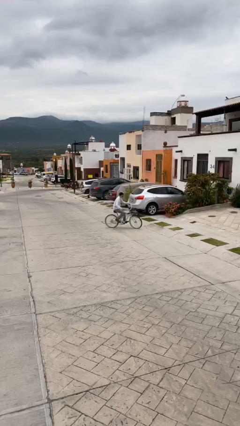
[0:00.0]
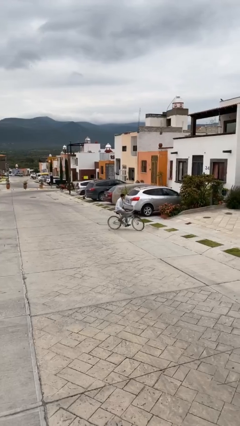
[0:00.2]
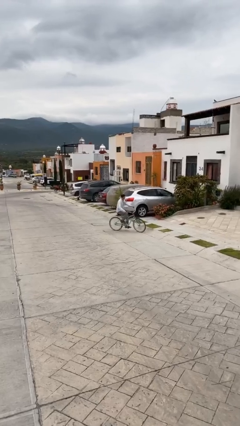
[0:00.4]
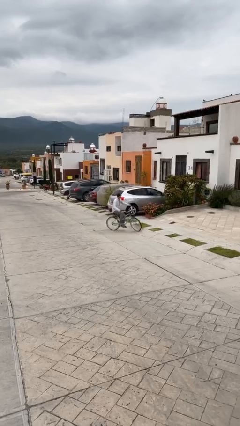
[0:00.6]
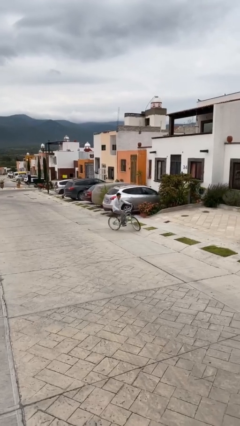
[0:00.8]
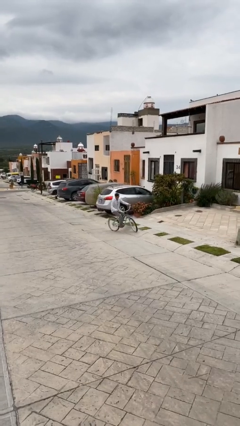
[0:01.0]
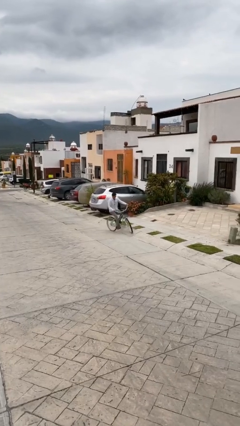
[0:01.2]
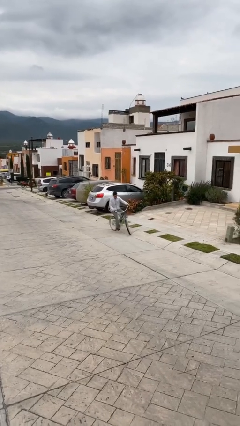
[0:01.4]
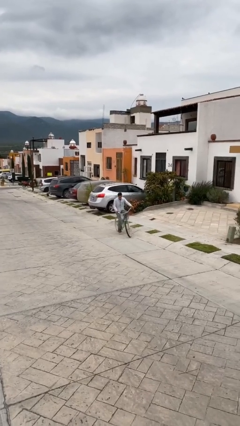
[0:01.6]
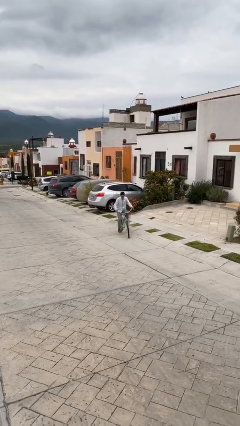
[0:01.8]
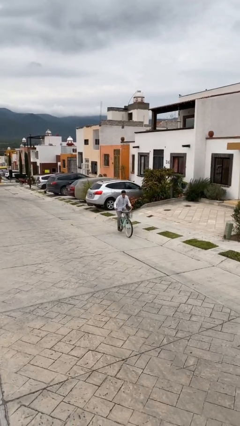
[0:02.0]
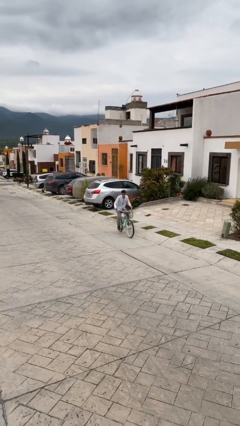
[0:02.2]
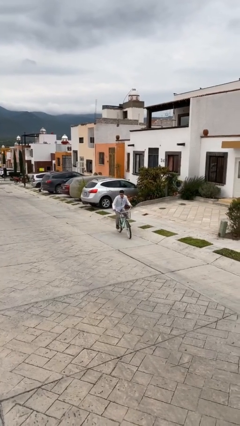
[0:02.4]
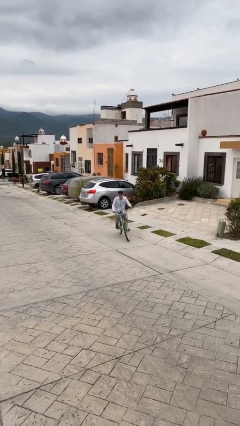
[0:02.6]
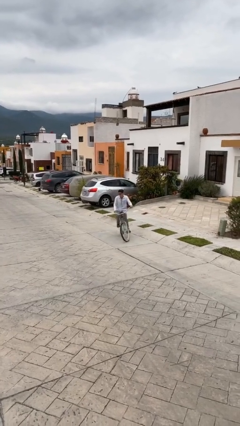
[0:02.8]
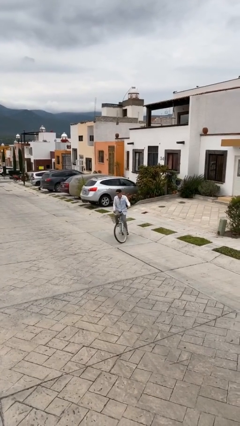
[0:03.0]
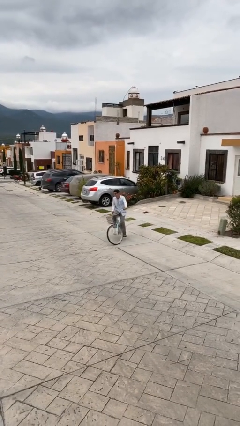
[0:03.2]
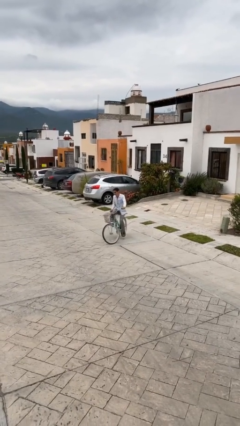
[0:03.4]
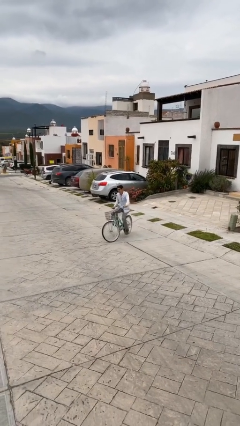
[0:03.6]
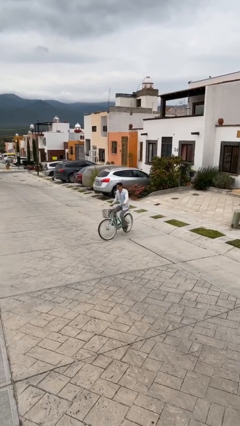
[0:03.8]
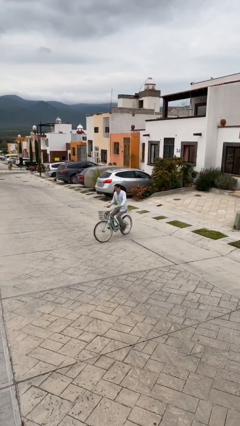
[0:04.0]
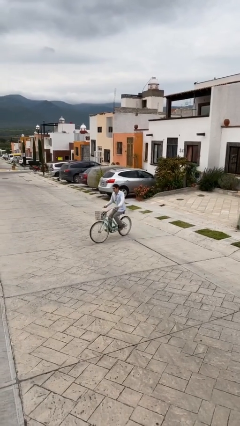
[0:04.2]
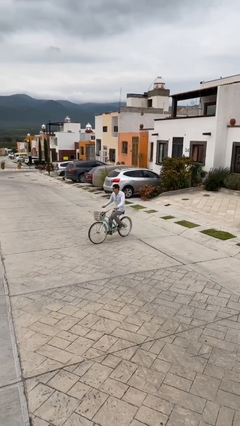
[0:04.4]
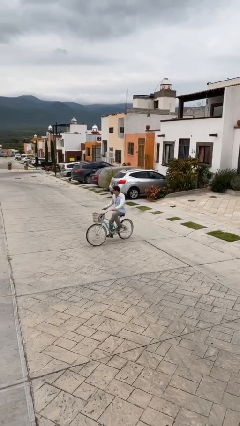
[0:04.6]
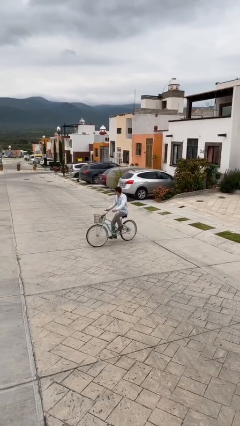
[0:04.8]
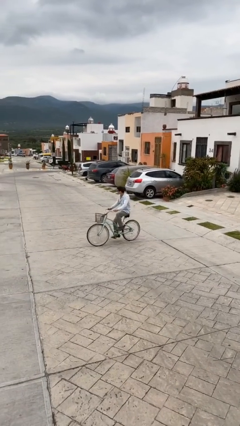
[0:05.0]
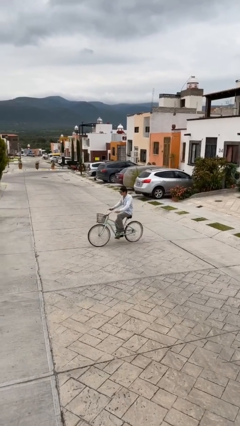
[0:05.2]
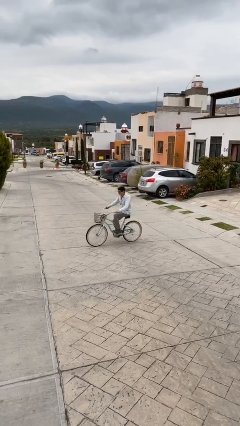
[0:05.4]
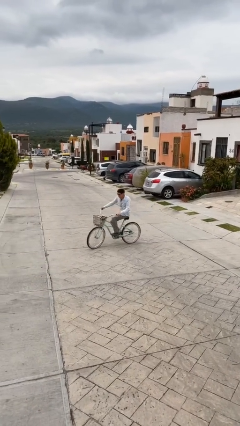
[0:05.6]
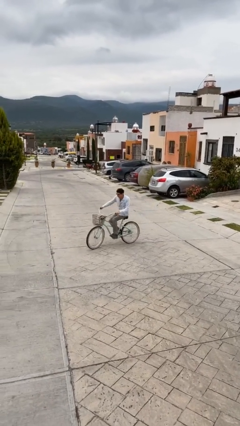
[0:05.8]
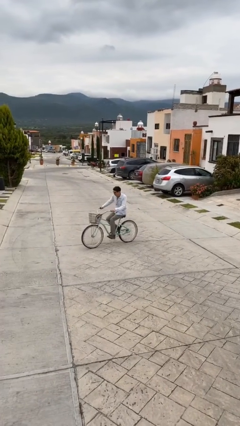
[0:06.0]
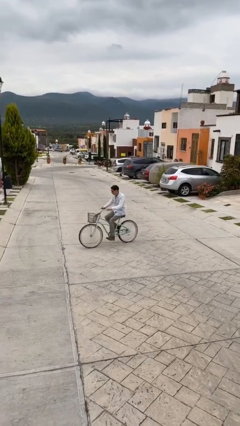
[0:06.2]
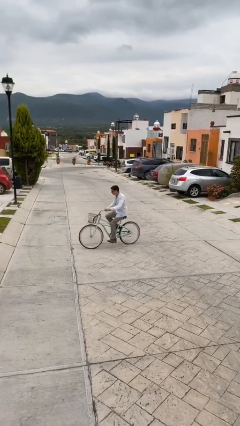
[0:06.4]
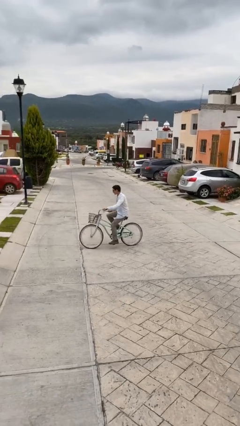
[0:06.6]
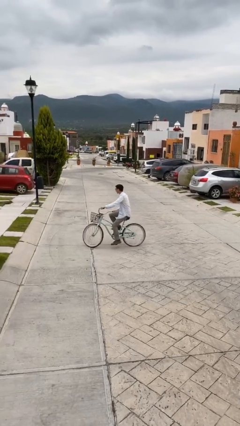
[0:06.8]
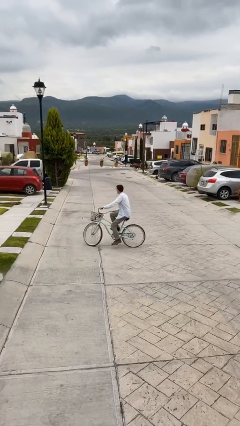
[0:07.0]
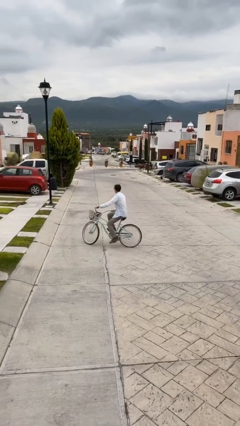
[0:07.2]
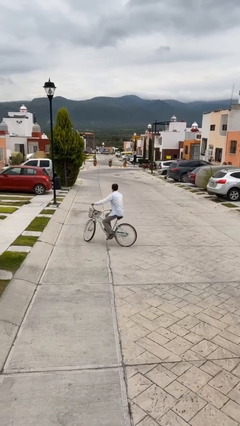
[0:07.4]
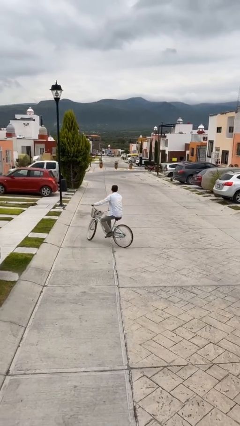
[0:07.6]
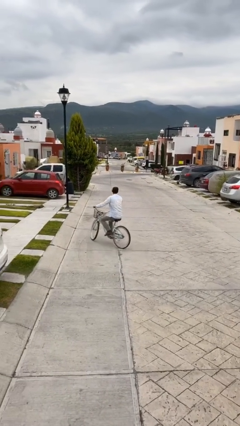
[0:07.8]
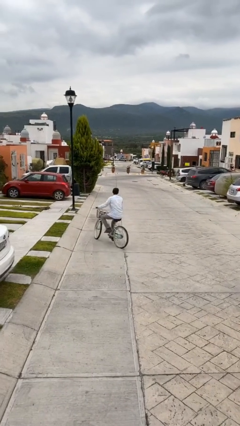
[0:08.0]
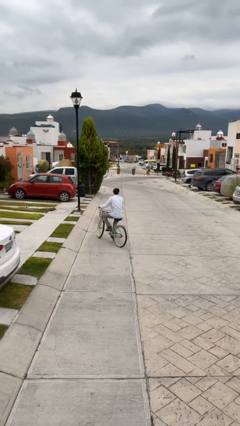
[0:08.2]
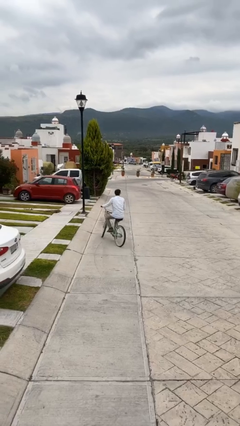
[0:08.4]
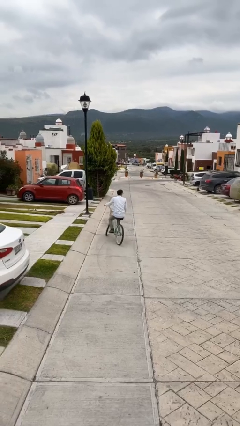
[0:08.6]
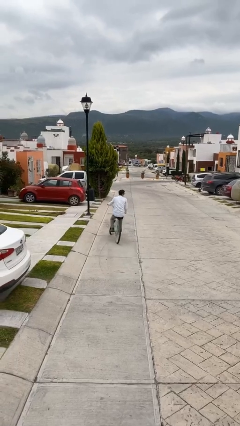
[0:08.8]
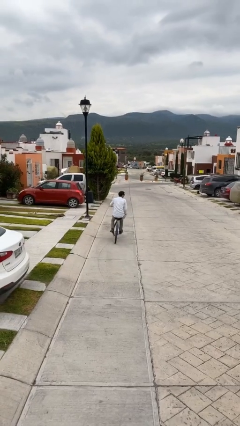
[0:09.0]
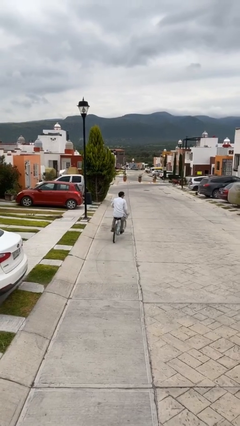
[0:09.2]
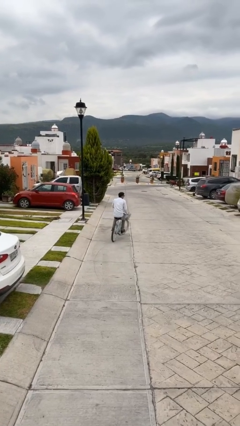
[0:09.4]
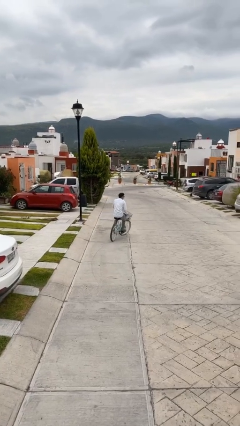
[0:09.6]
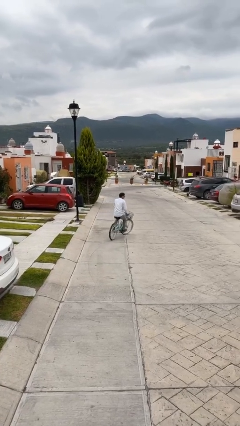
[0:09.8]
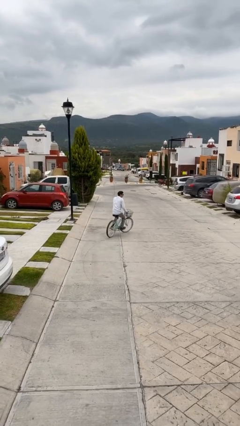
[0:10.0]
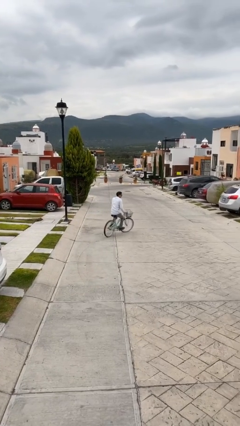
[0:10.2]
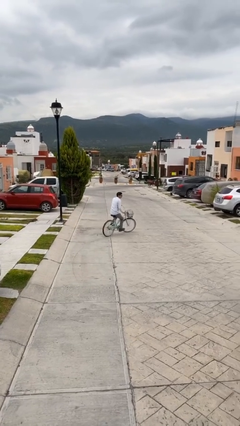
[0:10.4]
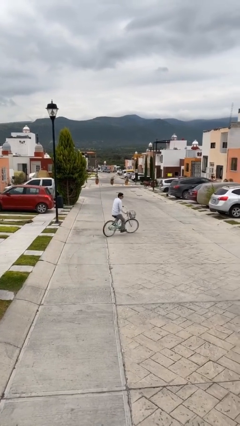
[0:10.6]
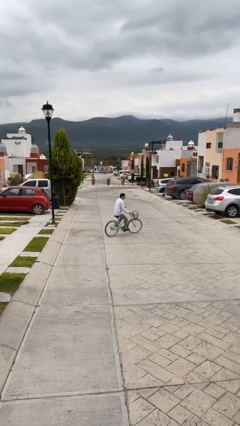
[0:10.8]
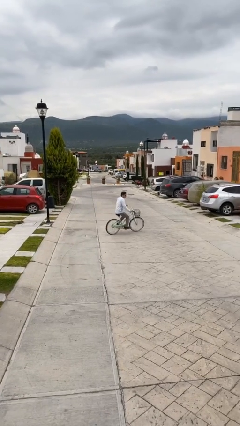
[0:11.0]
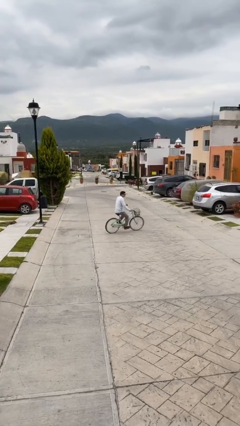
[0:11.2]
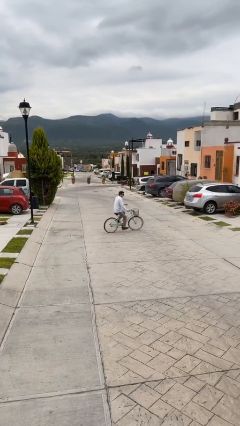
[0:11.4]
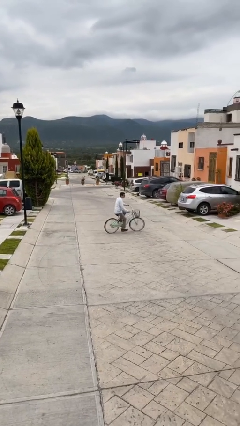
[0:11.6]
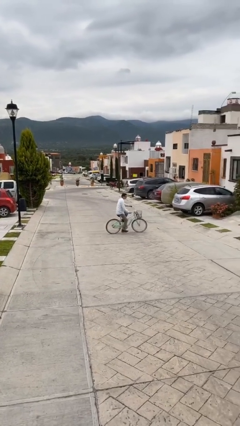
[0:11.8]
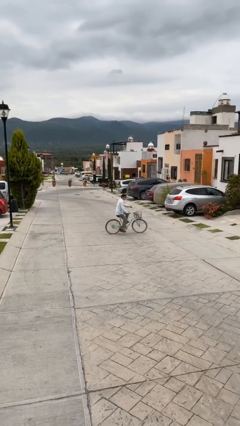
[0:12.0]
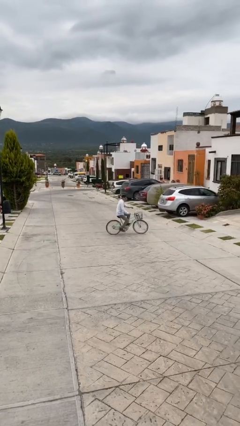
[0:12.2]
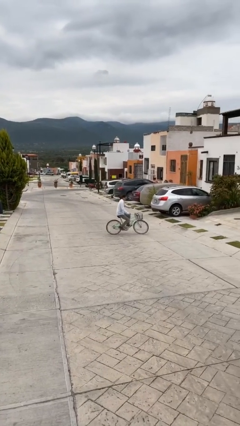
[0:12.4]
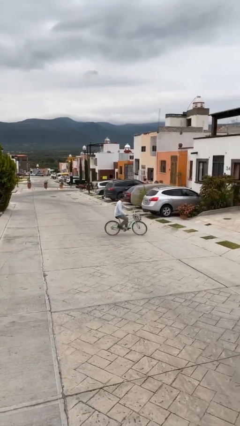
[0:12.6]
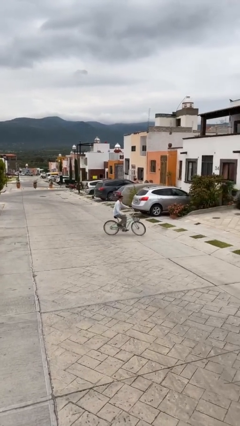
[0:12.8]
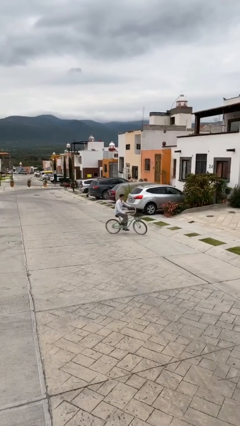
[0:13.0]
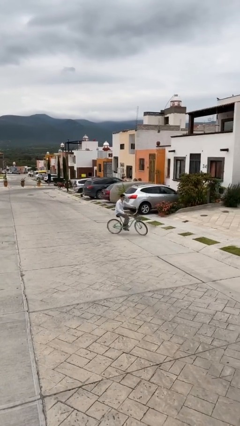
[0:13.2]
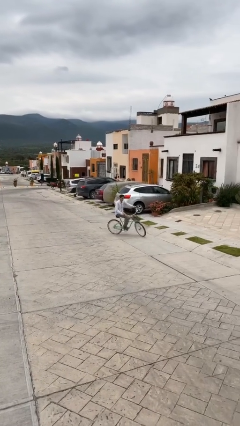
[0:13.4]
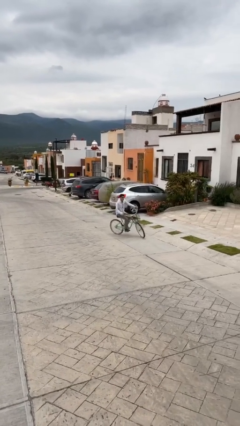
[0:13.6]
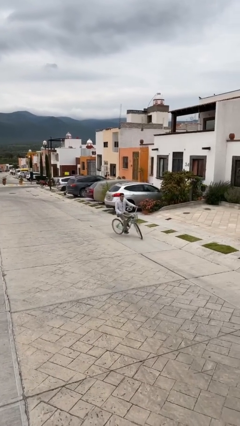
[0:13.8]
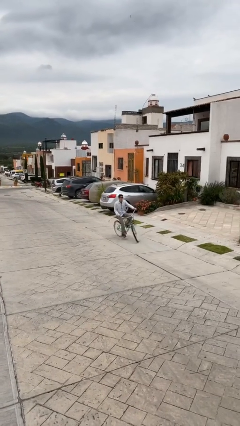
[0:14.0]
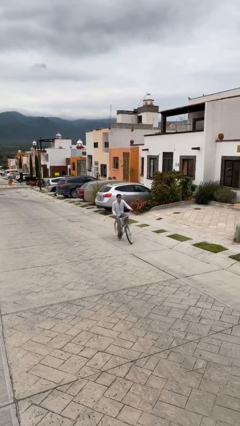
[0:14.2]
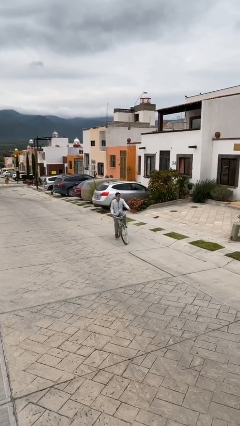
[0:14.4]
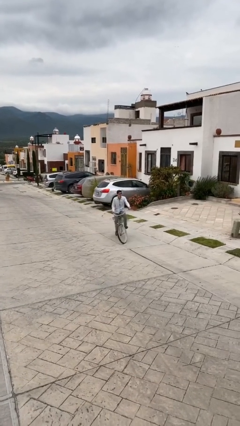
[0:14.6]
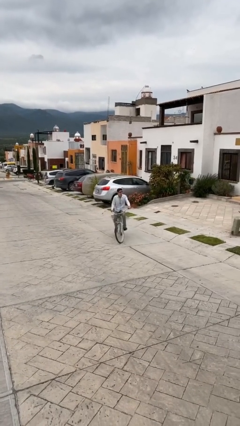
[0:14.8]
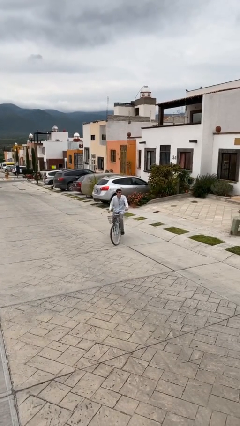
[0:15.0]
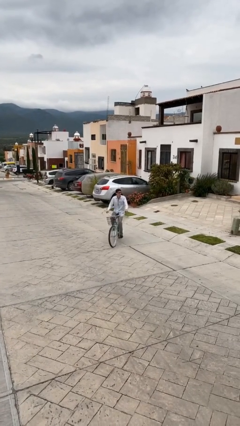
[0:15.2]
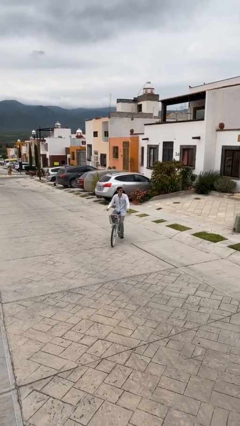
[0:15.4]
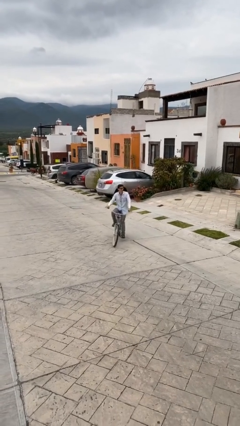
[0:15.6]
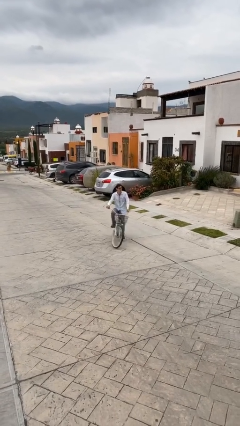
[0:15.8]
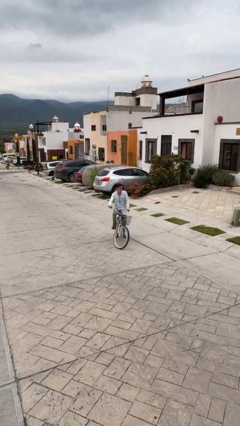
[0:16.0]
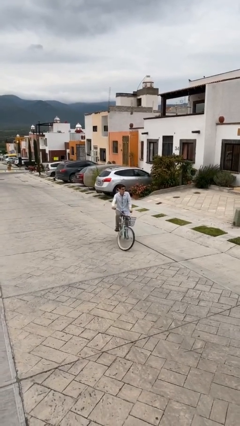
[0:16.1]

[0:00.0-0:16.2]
person rides bicycle

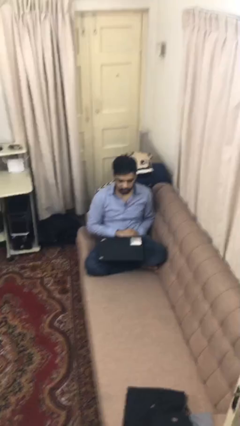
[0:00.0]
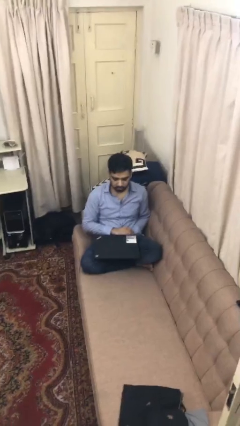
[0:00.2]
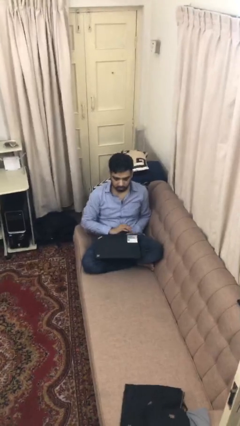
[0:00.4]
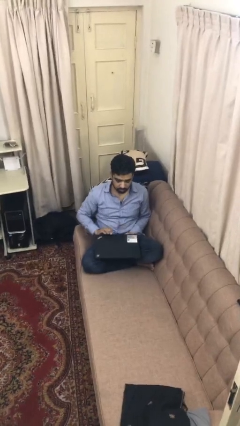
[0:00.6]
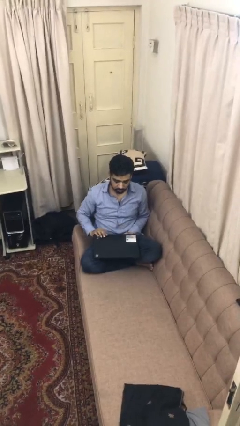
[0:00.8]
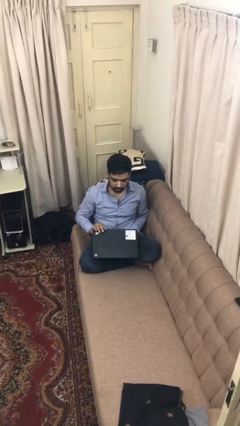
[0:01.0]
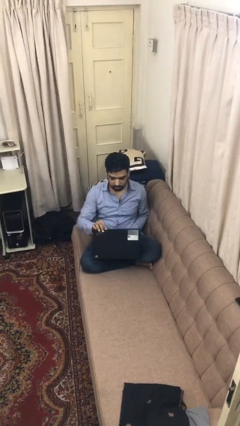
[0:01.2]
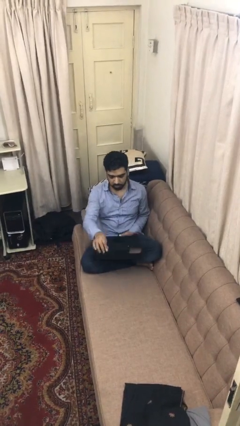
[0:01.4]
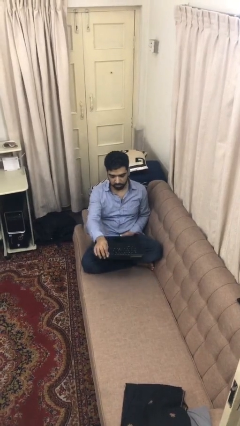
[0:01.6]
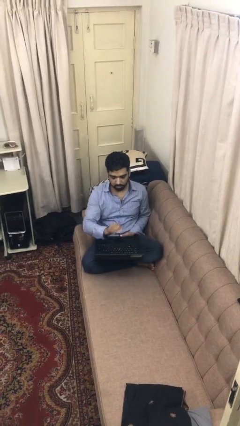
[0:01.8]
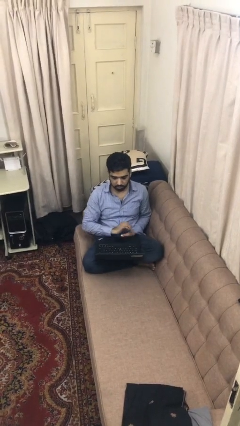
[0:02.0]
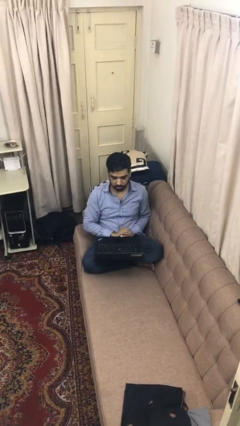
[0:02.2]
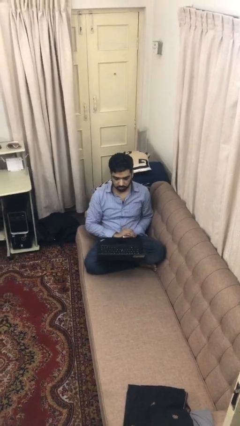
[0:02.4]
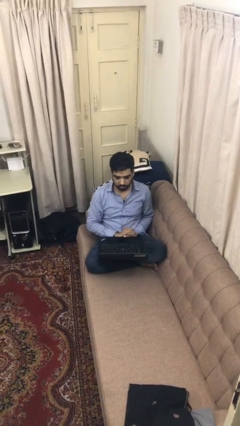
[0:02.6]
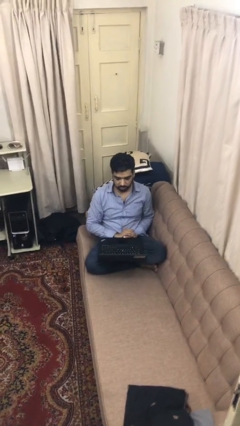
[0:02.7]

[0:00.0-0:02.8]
person opens laptop
